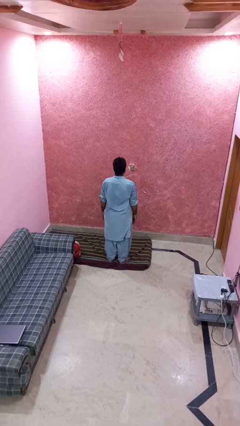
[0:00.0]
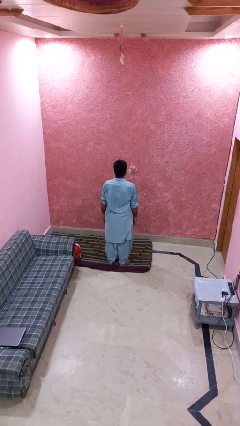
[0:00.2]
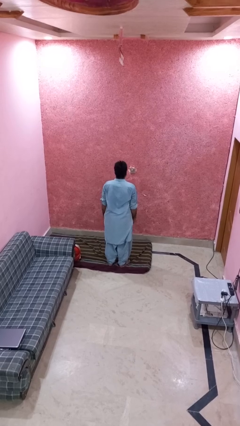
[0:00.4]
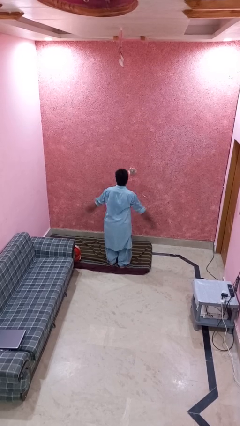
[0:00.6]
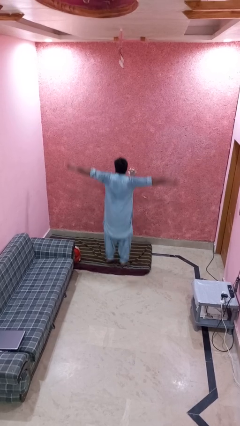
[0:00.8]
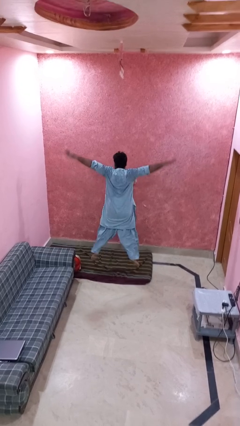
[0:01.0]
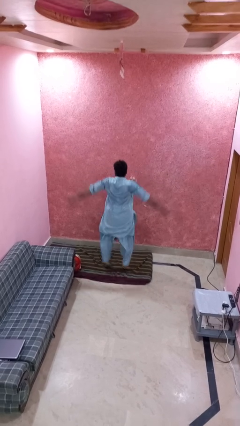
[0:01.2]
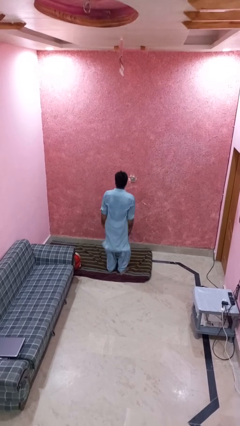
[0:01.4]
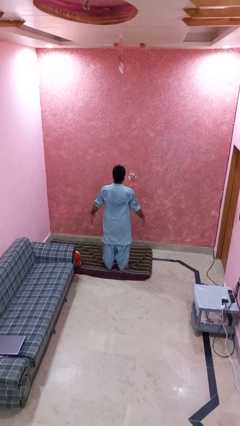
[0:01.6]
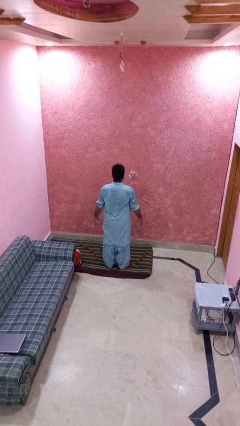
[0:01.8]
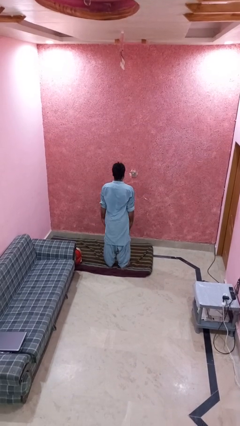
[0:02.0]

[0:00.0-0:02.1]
person exercises with jumping jacks

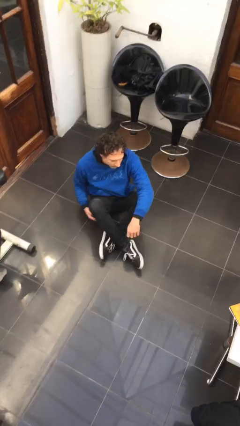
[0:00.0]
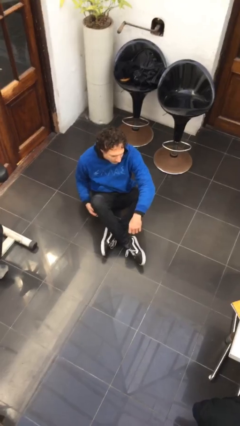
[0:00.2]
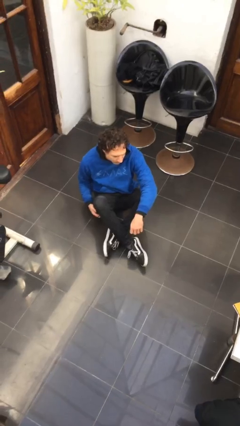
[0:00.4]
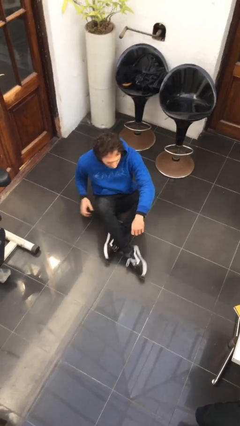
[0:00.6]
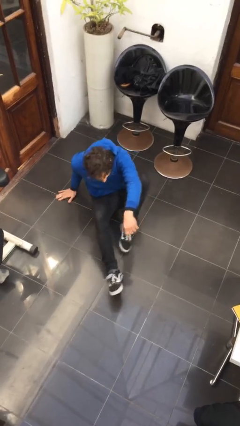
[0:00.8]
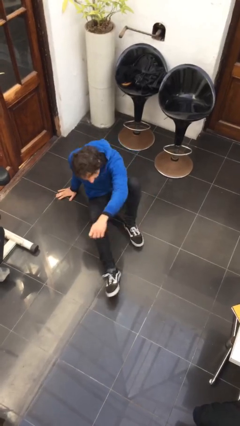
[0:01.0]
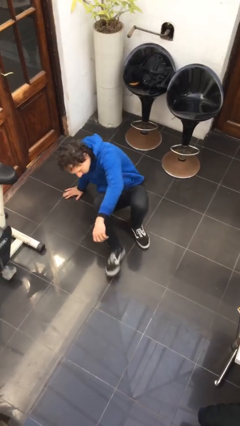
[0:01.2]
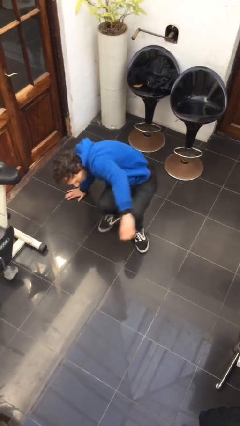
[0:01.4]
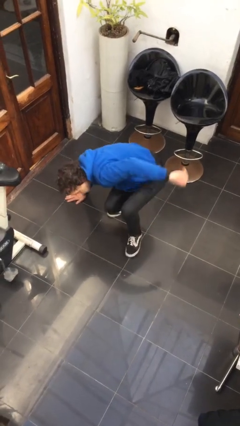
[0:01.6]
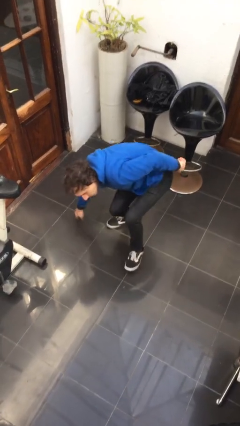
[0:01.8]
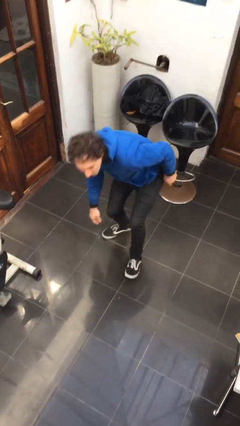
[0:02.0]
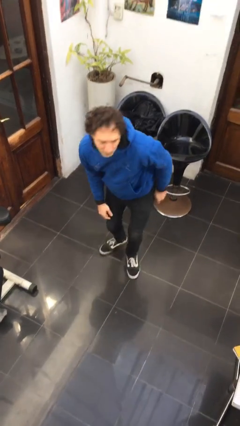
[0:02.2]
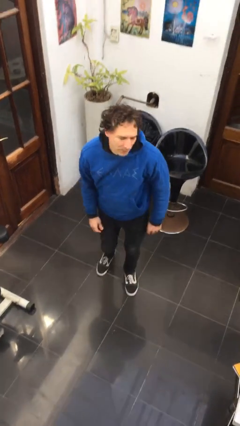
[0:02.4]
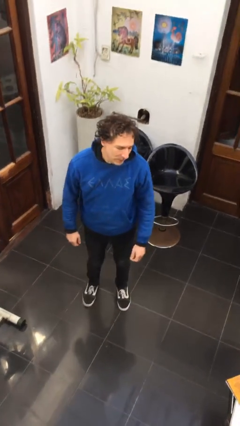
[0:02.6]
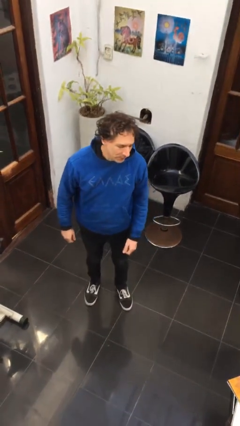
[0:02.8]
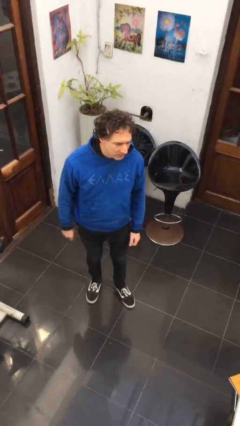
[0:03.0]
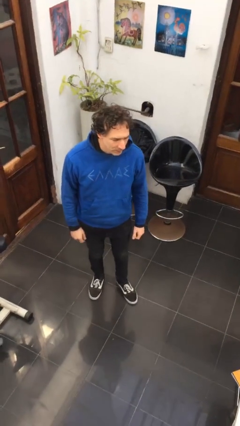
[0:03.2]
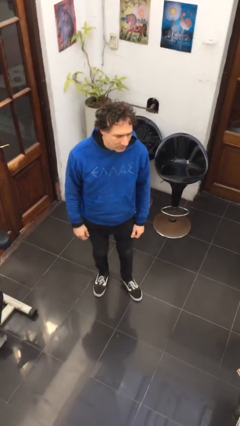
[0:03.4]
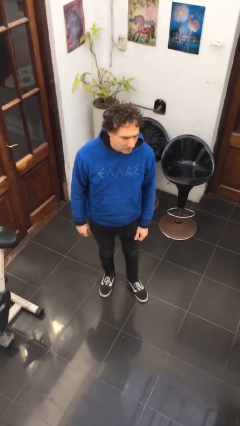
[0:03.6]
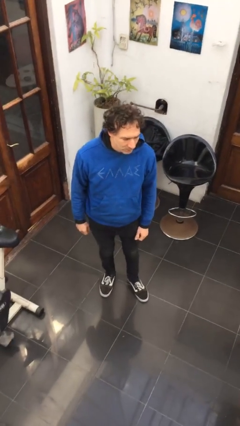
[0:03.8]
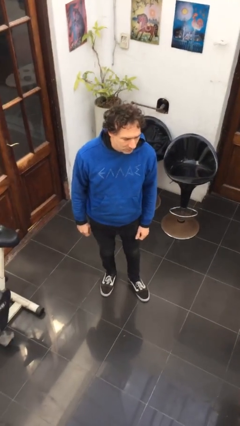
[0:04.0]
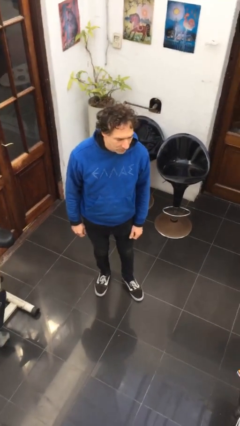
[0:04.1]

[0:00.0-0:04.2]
person stands up from floor

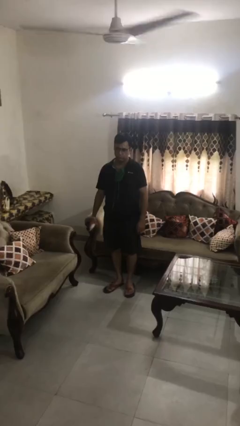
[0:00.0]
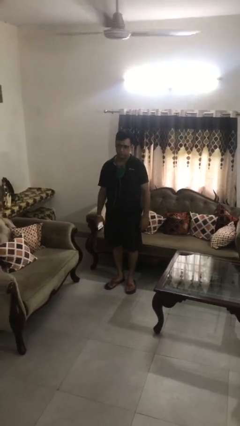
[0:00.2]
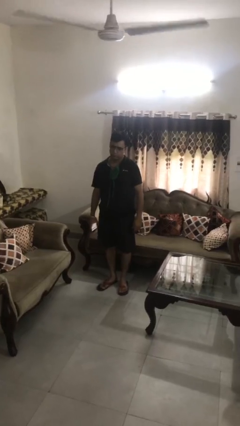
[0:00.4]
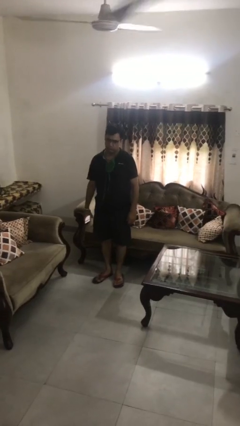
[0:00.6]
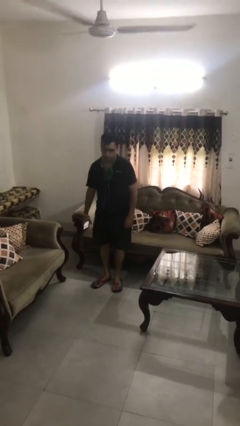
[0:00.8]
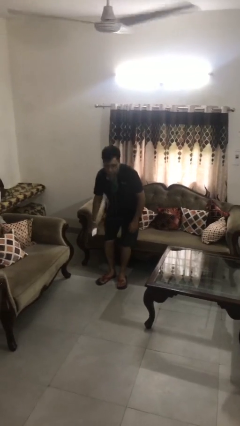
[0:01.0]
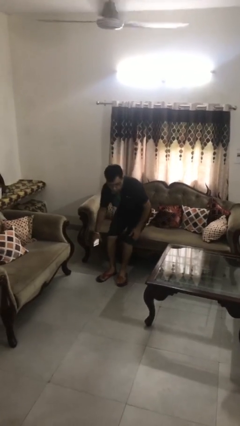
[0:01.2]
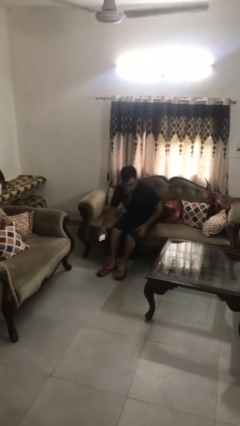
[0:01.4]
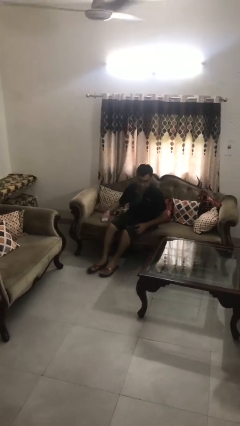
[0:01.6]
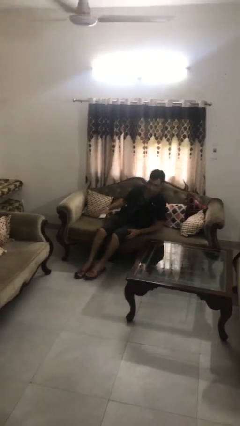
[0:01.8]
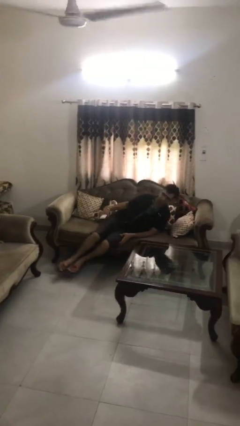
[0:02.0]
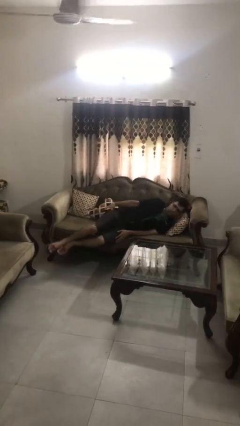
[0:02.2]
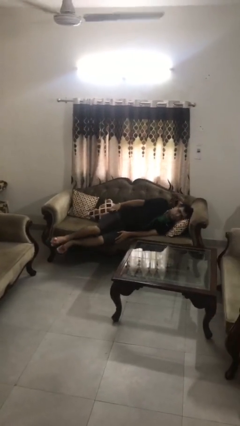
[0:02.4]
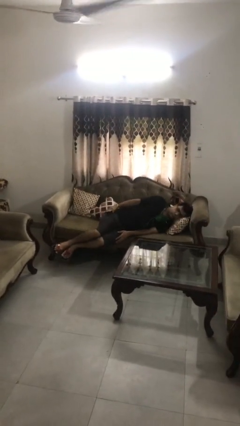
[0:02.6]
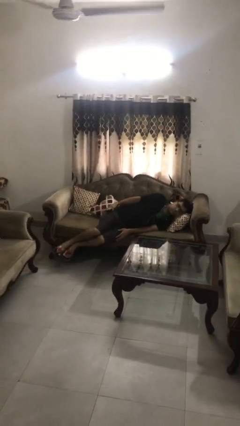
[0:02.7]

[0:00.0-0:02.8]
person lies down on couch

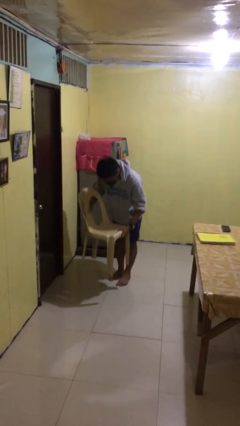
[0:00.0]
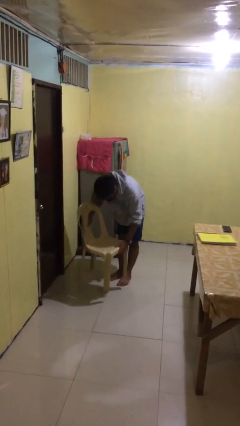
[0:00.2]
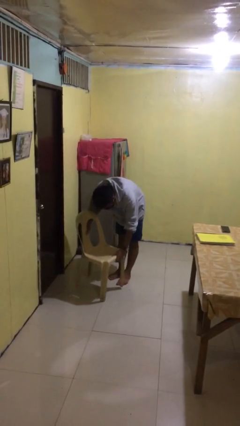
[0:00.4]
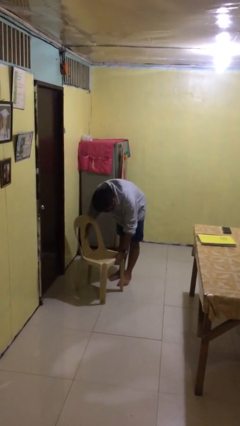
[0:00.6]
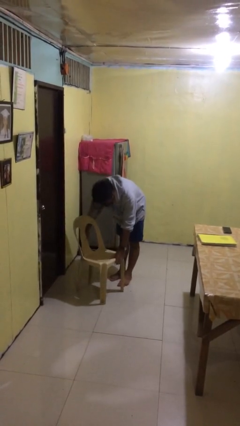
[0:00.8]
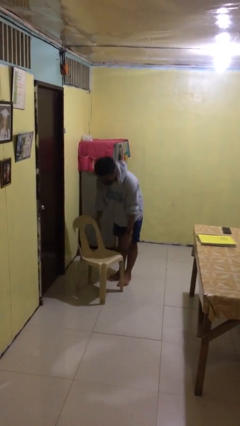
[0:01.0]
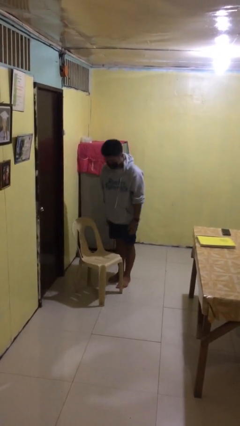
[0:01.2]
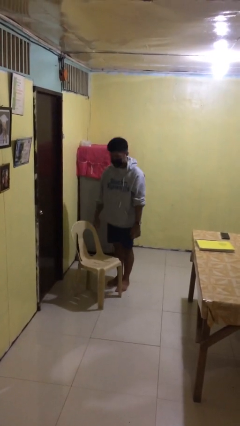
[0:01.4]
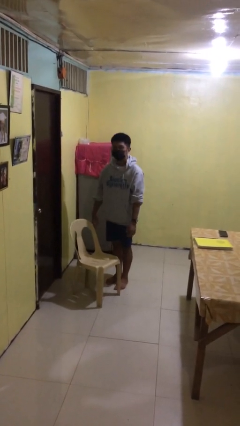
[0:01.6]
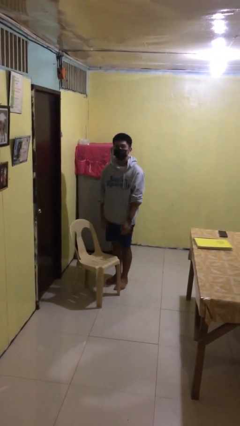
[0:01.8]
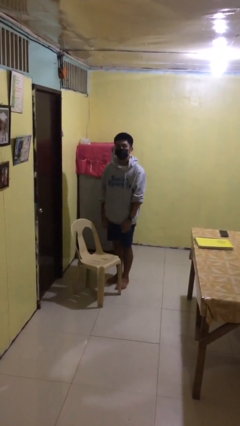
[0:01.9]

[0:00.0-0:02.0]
person puts down object on floor

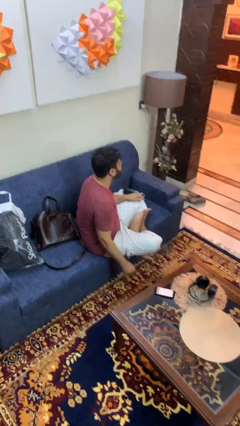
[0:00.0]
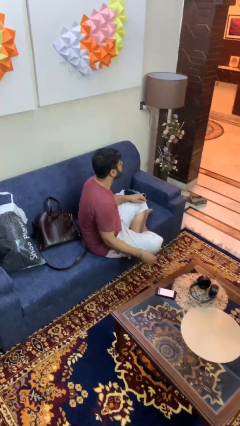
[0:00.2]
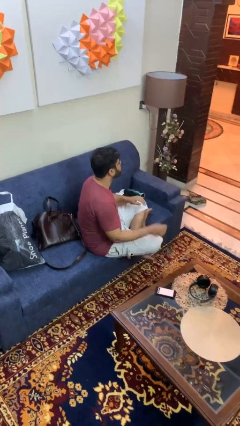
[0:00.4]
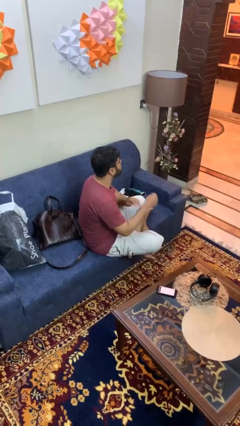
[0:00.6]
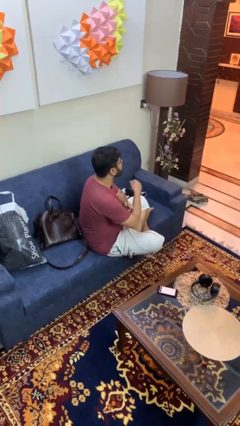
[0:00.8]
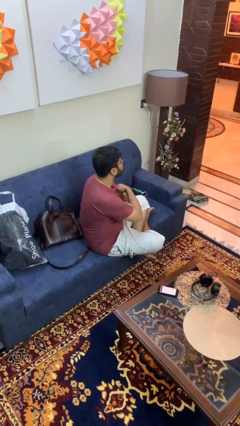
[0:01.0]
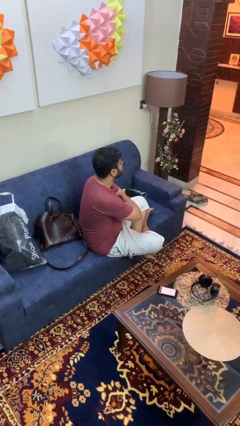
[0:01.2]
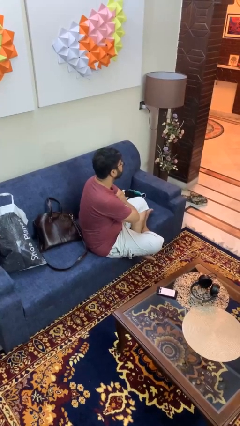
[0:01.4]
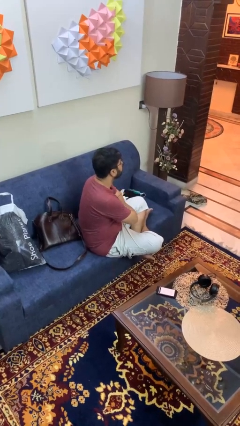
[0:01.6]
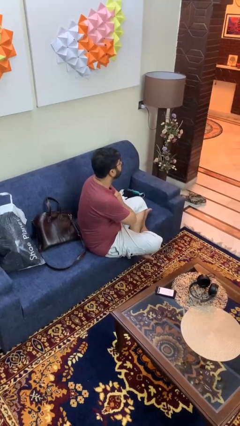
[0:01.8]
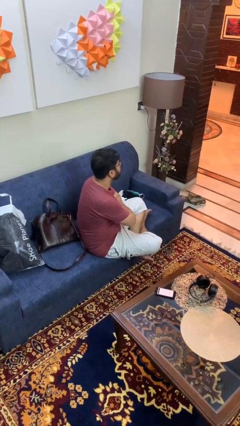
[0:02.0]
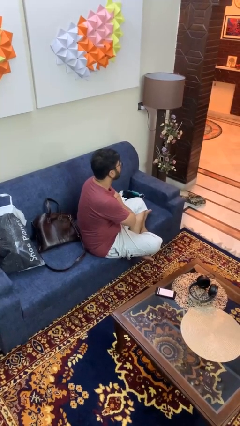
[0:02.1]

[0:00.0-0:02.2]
person crosses arms

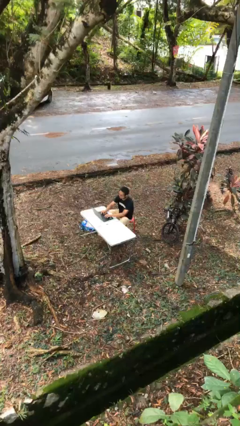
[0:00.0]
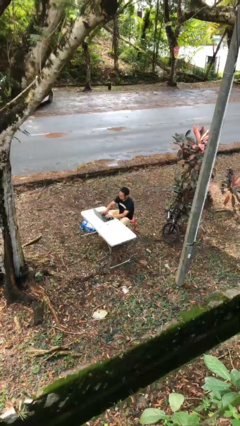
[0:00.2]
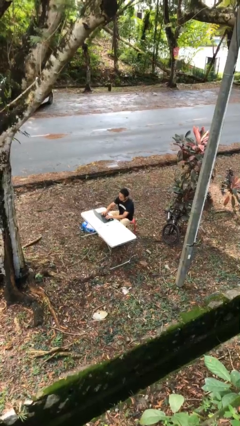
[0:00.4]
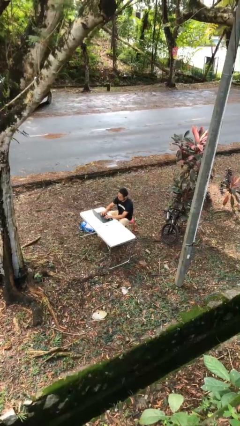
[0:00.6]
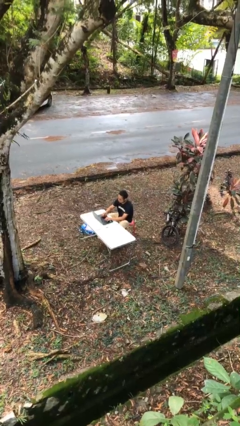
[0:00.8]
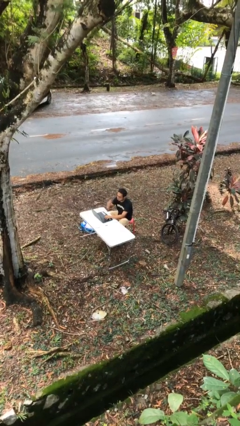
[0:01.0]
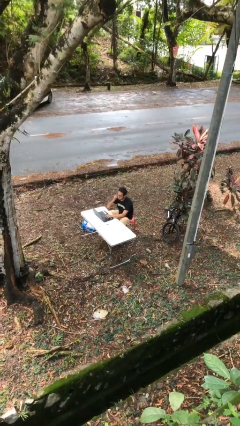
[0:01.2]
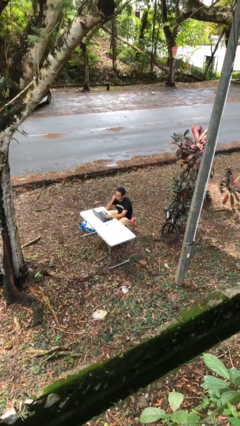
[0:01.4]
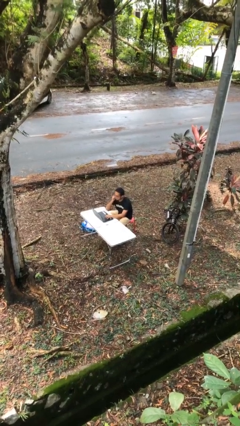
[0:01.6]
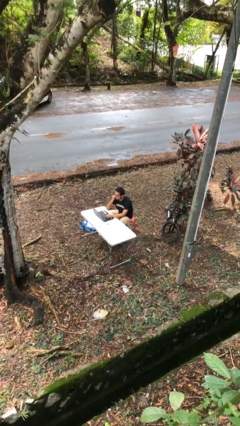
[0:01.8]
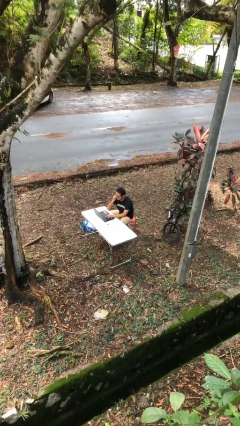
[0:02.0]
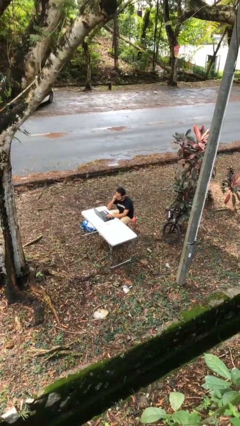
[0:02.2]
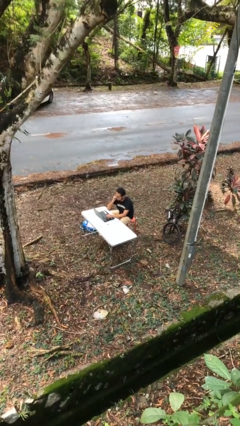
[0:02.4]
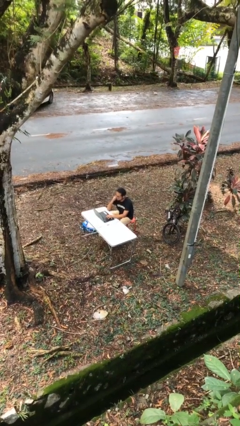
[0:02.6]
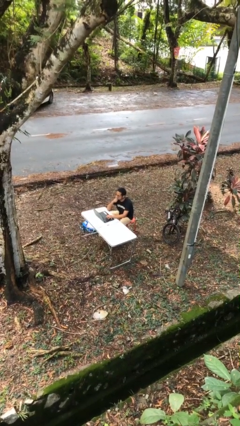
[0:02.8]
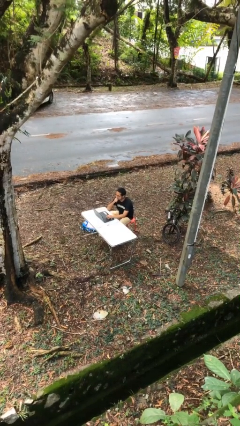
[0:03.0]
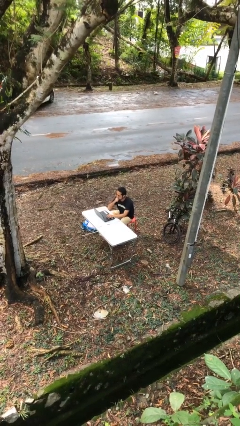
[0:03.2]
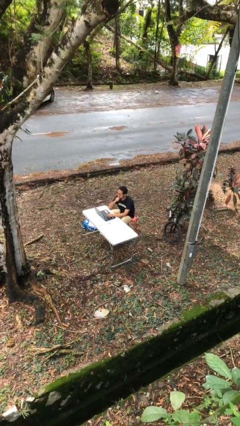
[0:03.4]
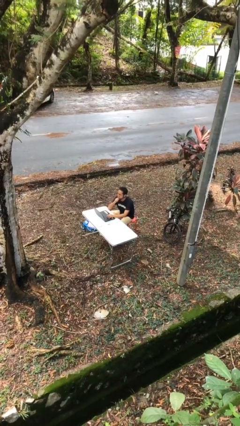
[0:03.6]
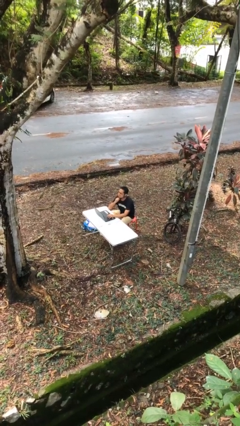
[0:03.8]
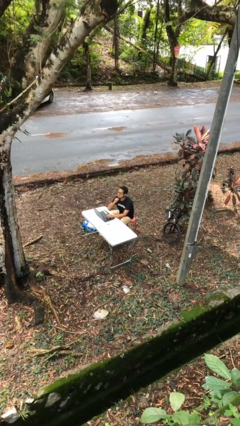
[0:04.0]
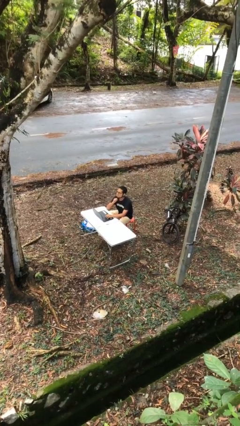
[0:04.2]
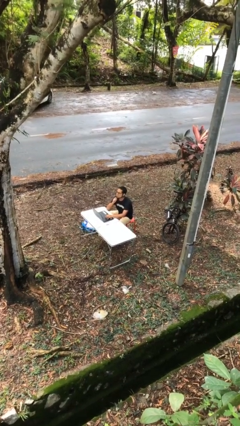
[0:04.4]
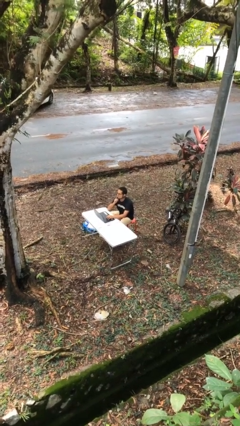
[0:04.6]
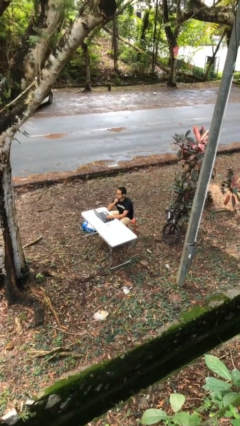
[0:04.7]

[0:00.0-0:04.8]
person interacts with laptop
